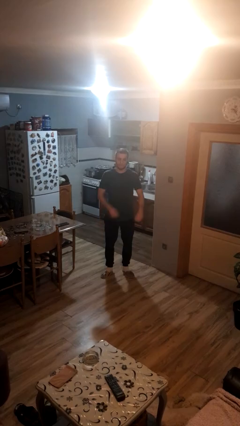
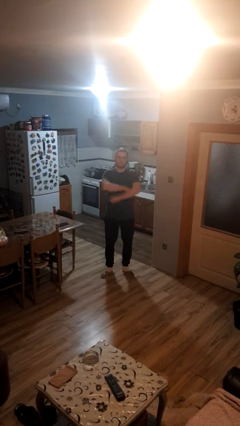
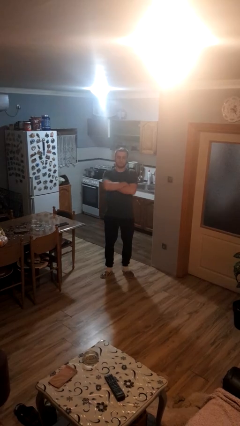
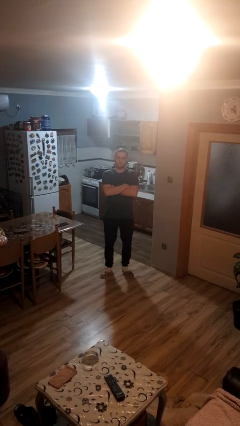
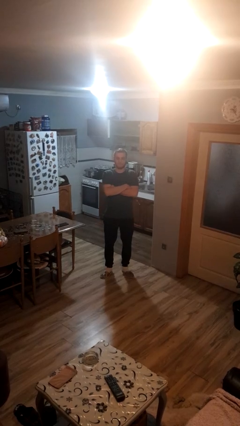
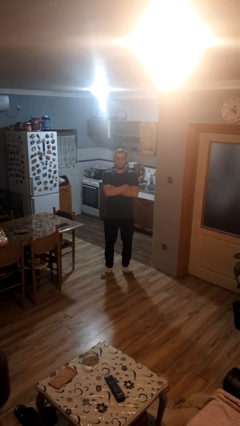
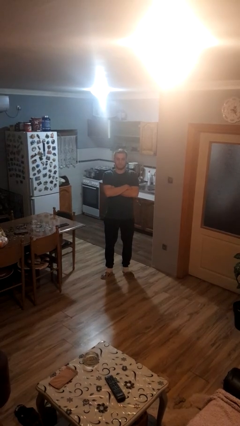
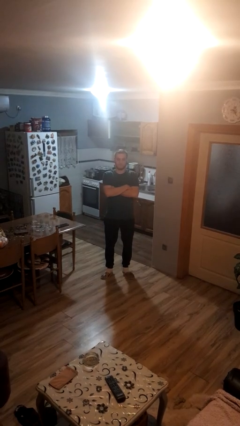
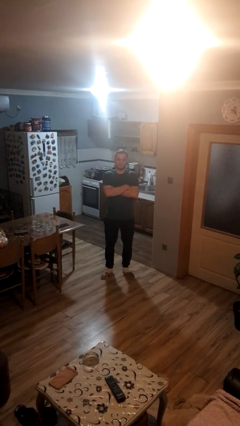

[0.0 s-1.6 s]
person crosses arms

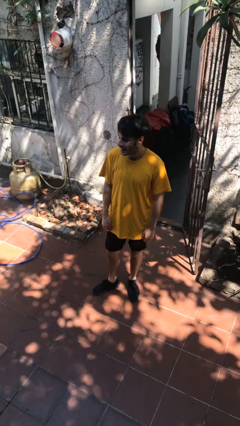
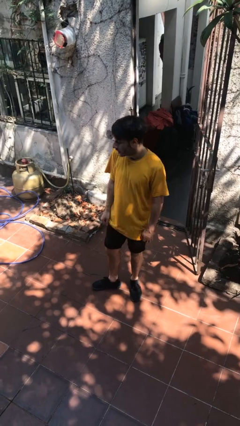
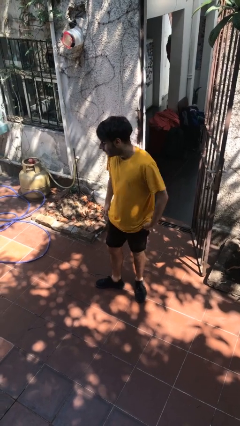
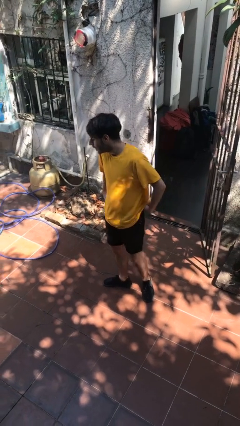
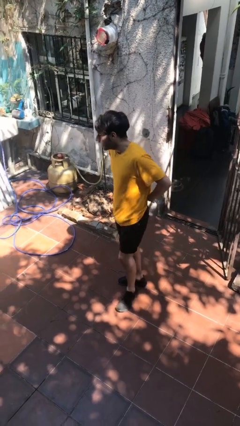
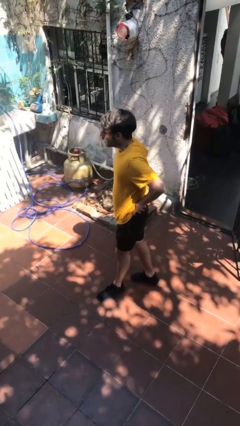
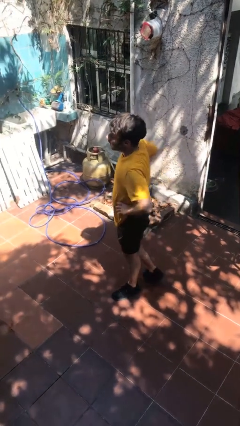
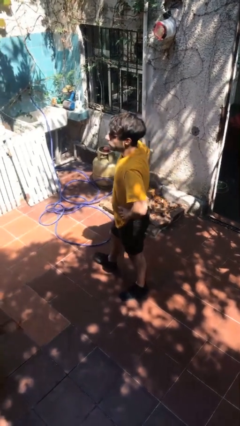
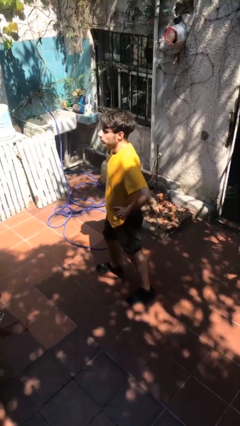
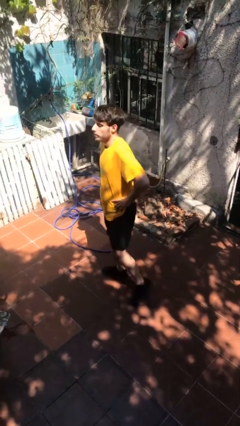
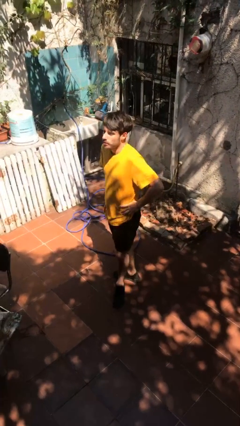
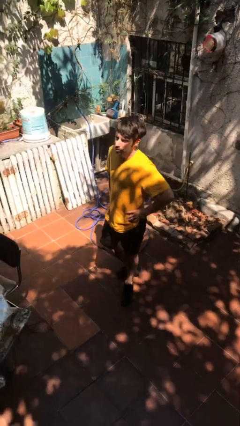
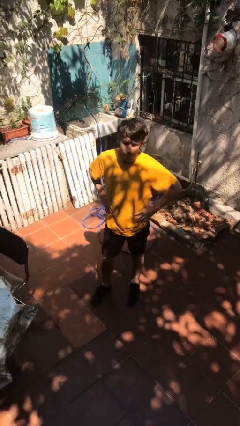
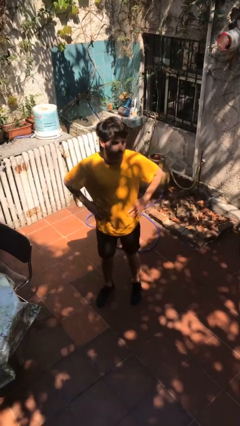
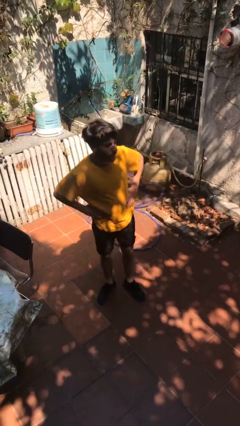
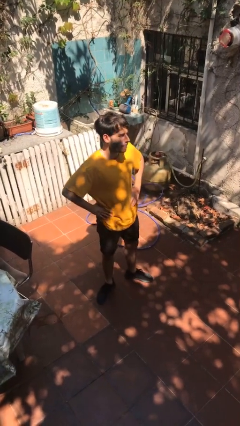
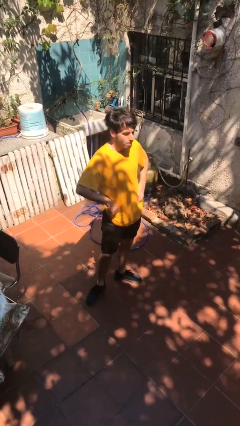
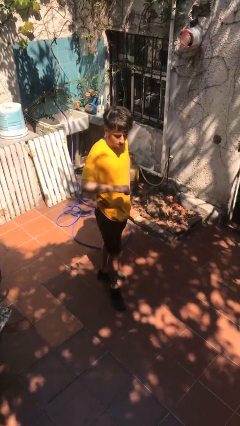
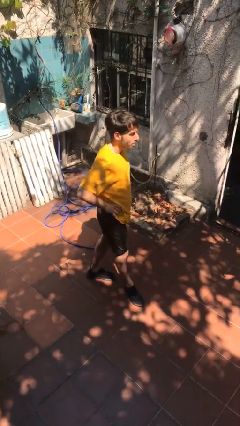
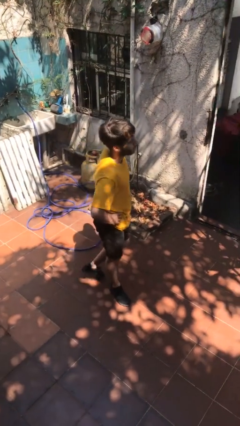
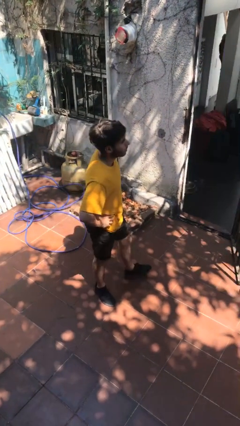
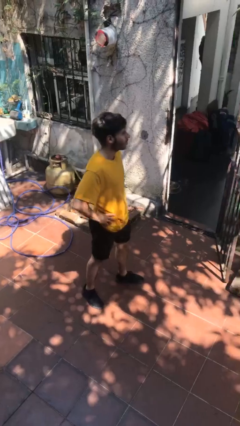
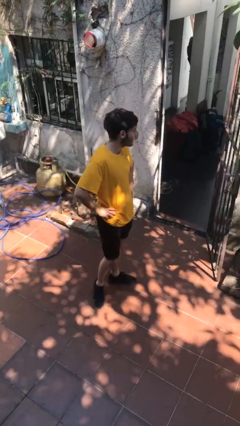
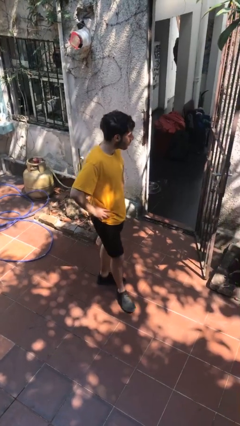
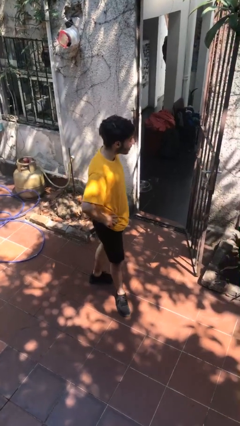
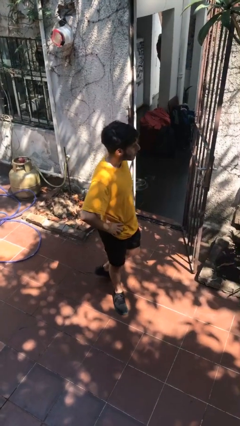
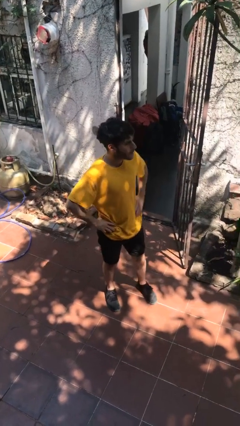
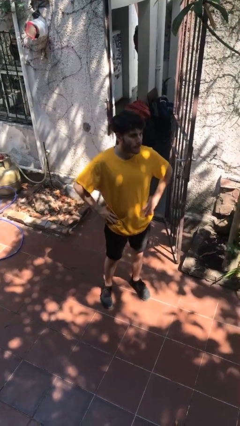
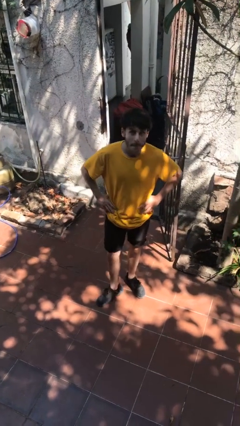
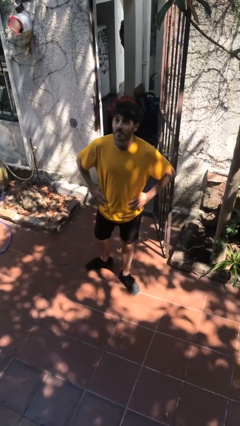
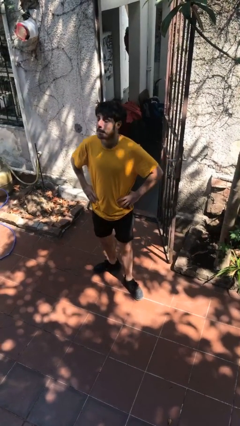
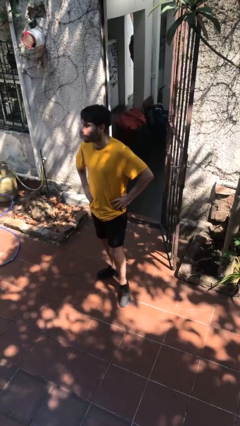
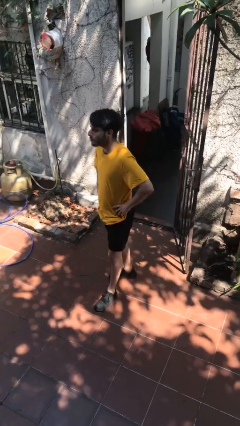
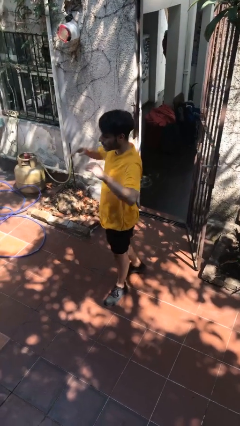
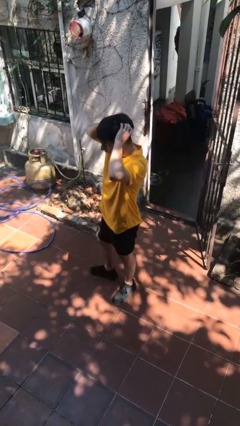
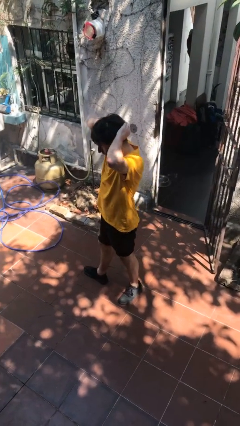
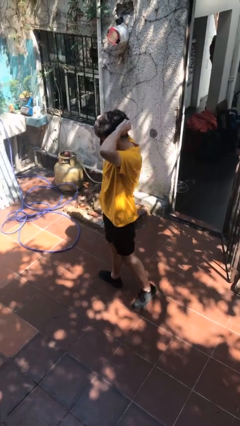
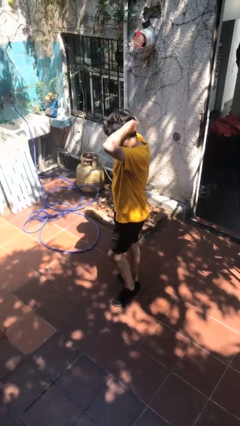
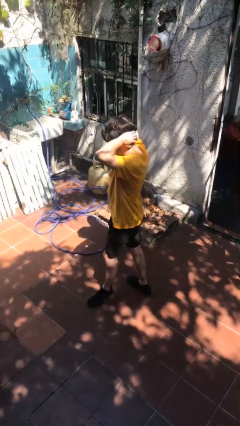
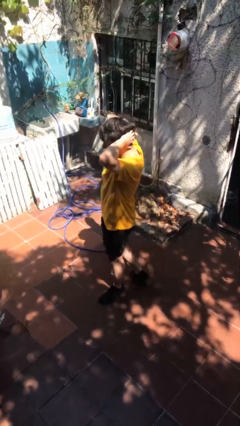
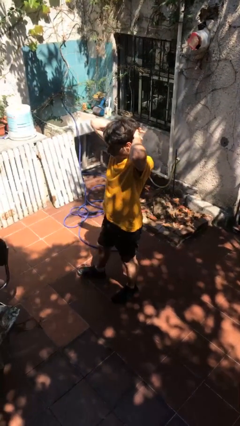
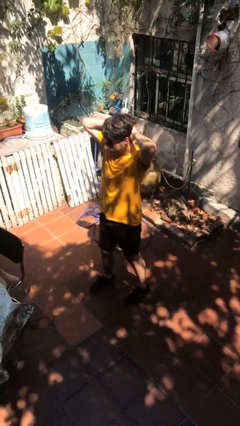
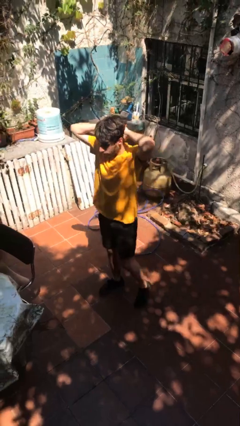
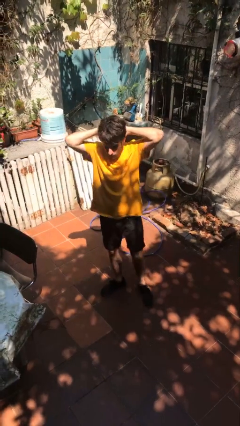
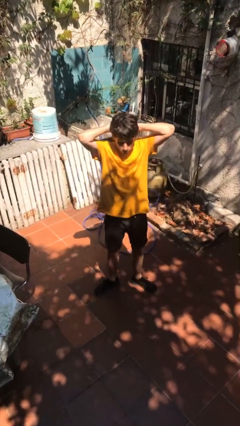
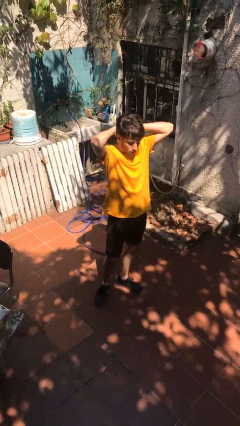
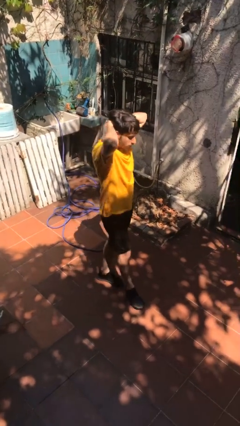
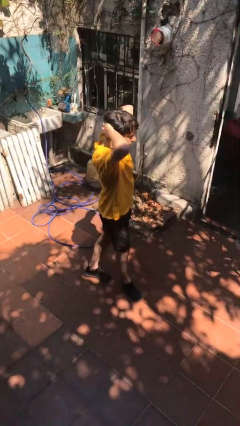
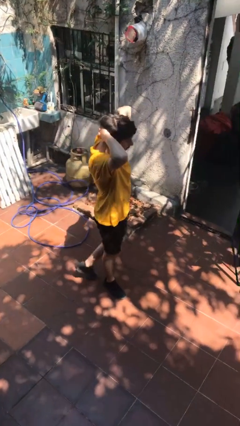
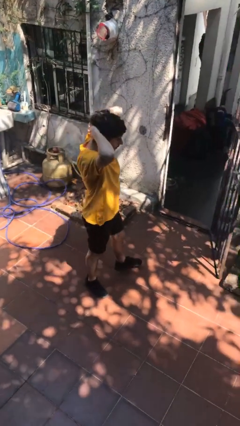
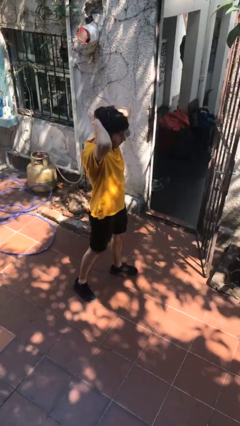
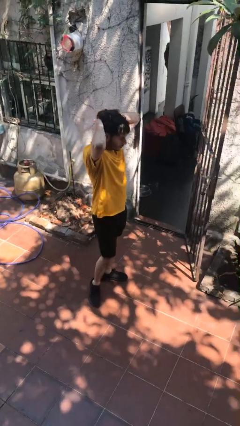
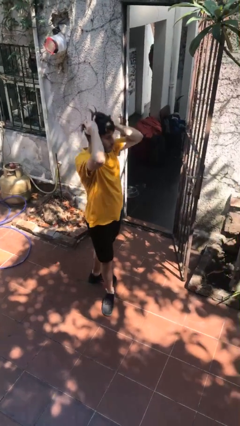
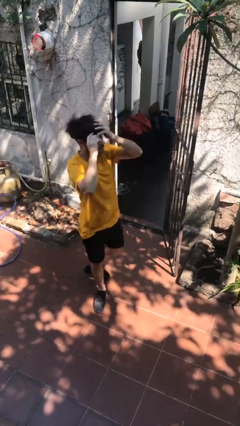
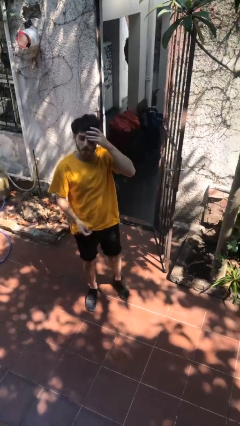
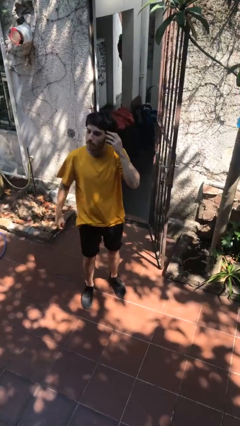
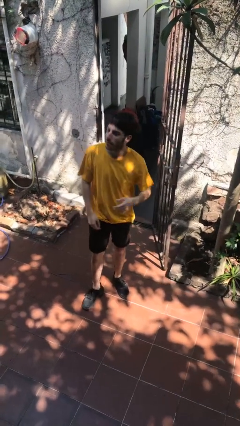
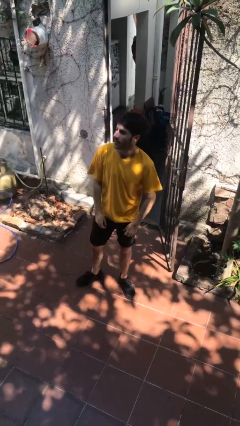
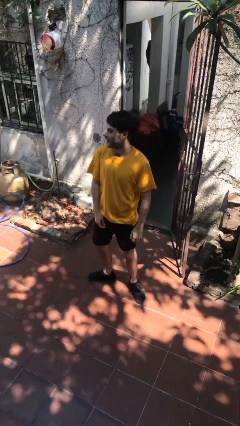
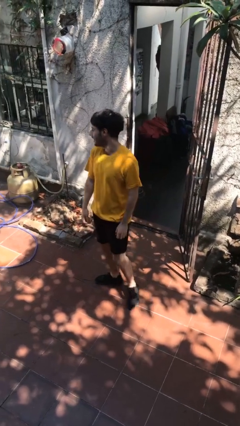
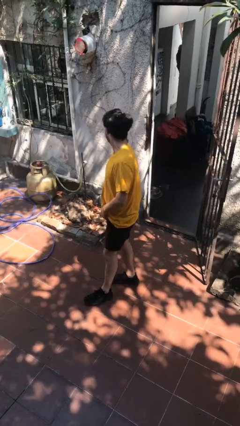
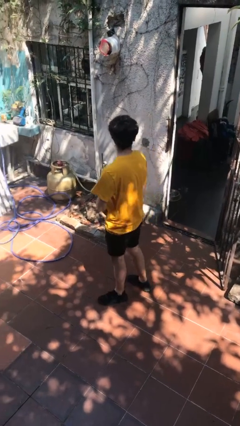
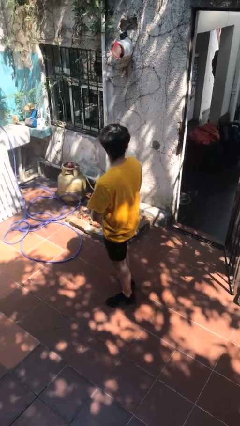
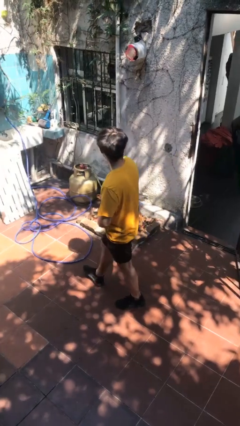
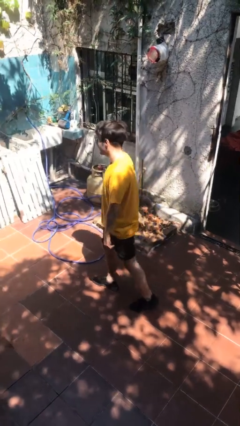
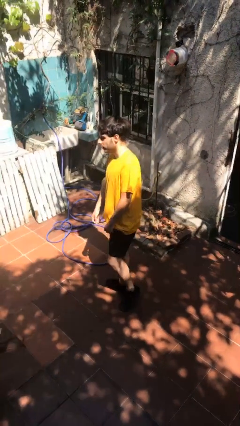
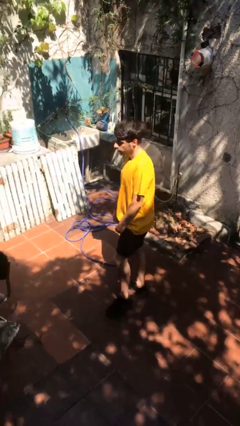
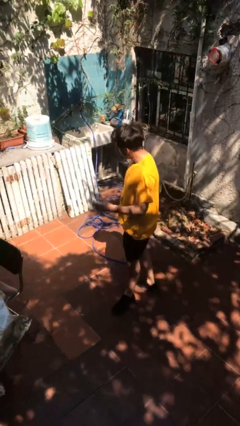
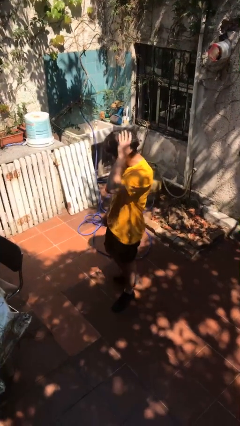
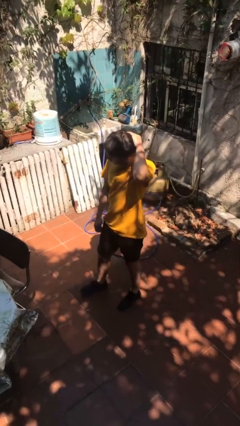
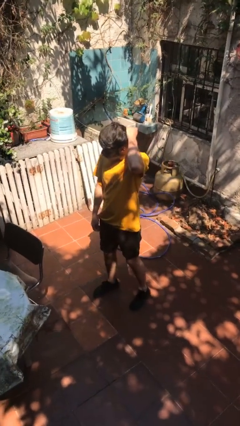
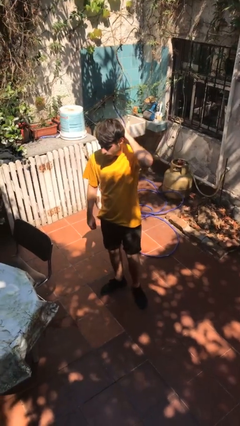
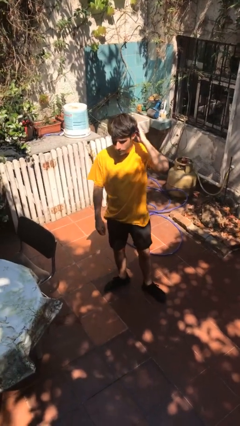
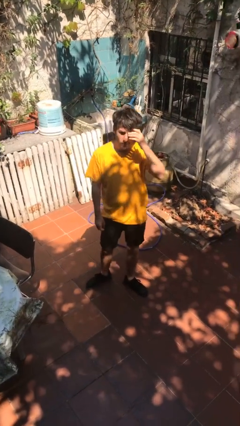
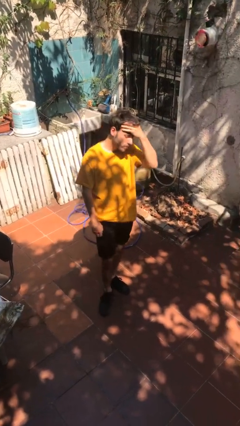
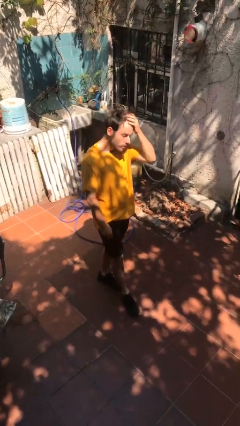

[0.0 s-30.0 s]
person walks

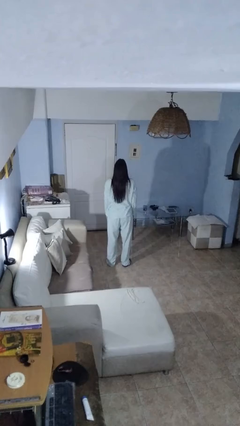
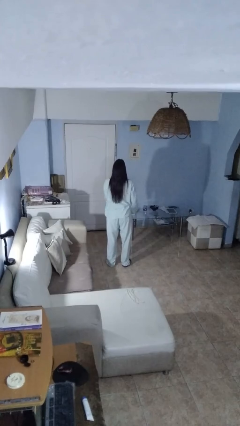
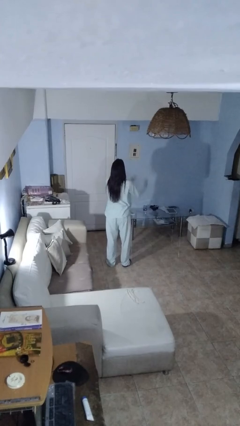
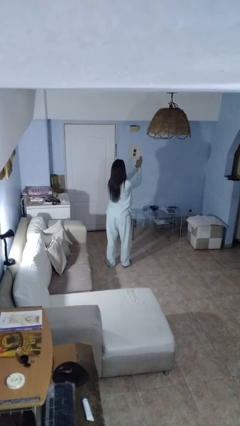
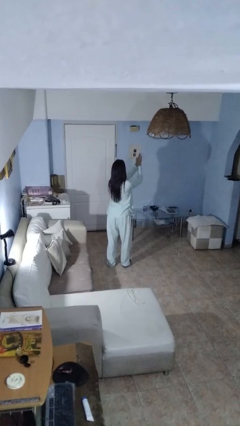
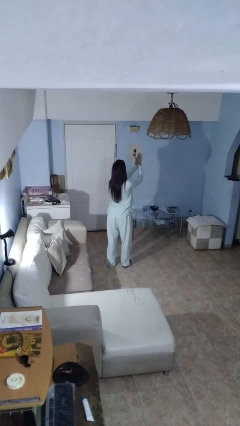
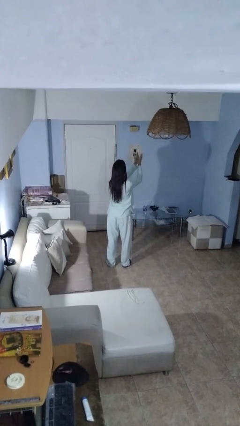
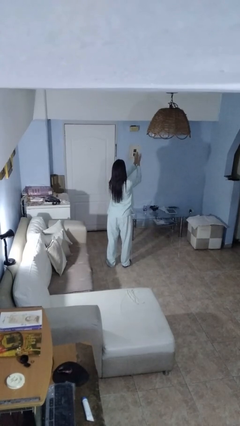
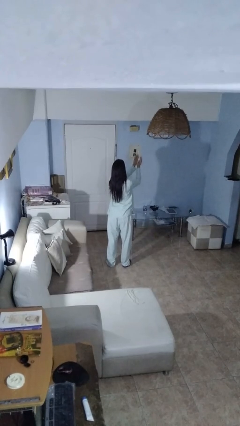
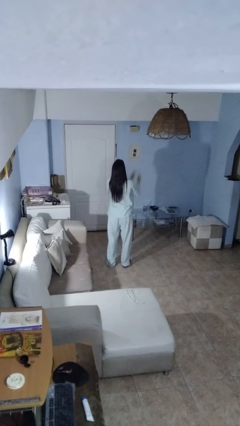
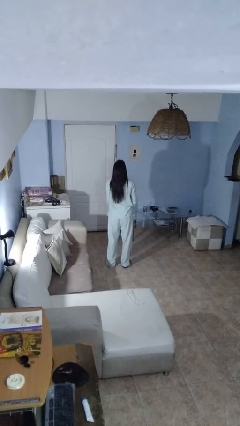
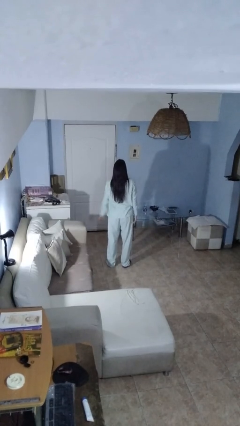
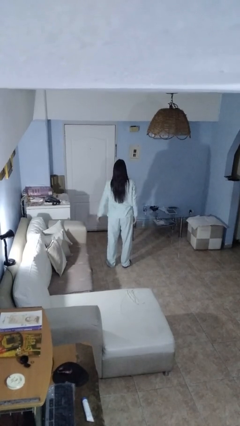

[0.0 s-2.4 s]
person claps hands
